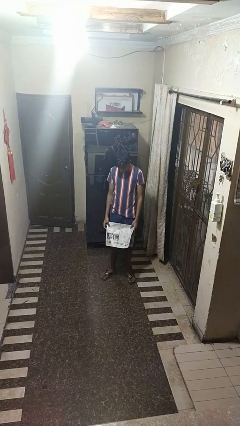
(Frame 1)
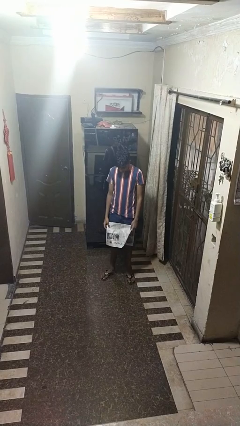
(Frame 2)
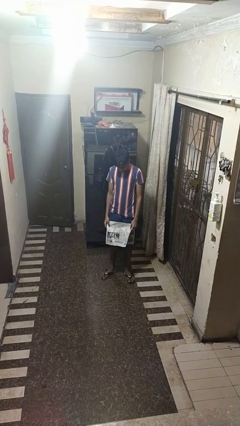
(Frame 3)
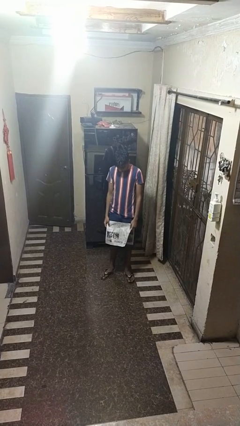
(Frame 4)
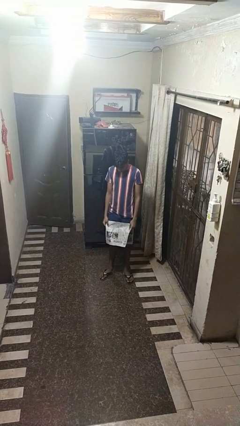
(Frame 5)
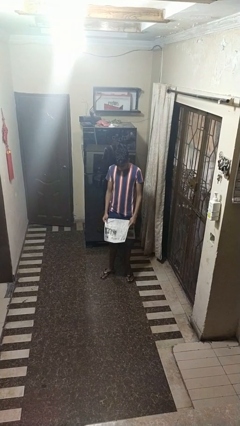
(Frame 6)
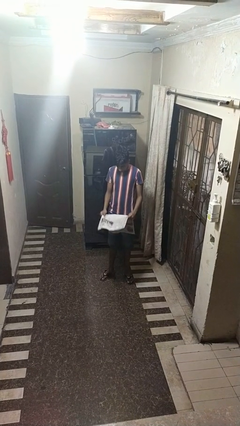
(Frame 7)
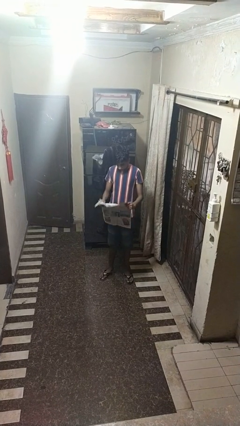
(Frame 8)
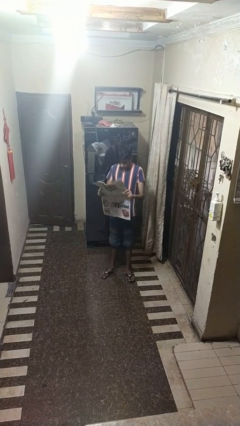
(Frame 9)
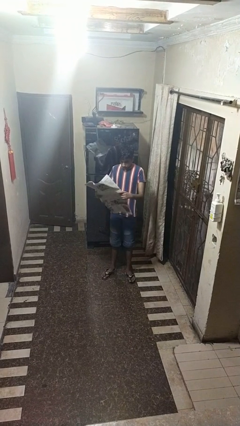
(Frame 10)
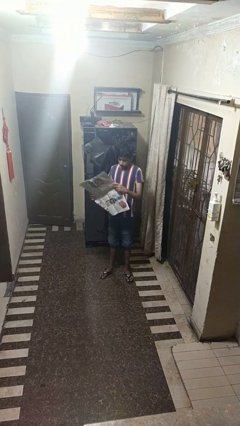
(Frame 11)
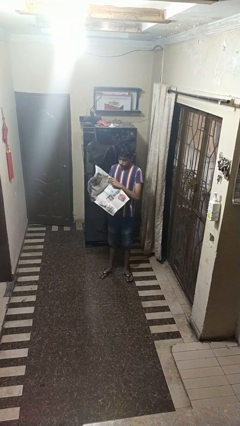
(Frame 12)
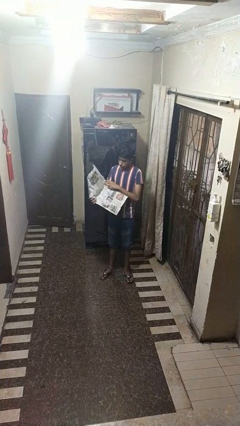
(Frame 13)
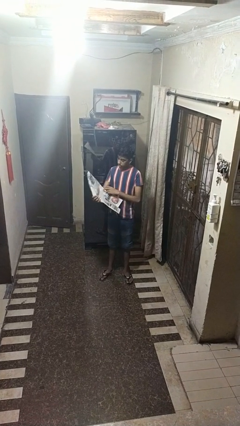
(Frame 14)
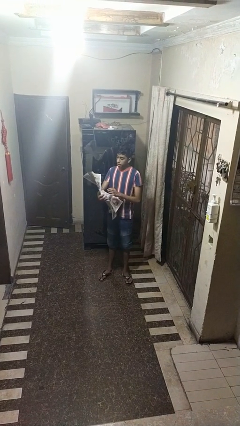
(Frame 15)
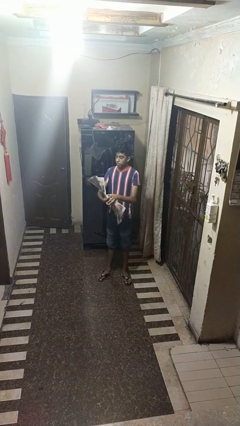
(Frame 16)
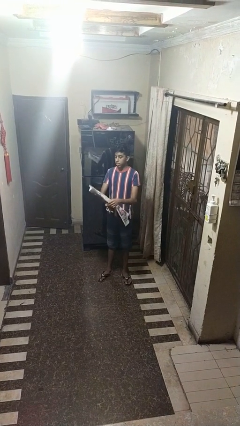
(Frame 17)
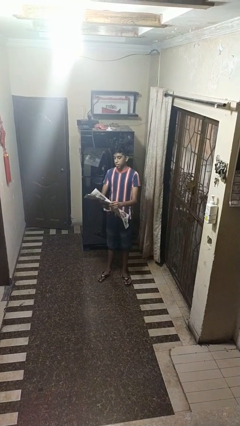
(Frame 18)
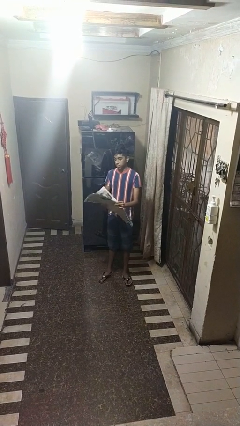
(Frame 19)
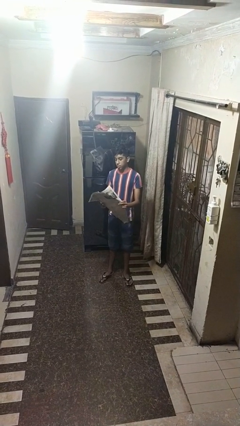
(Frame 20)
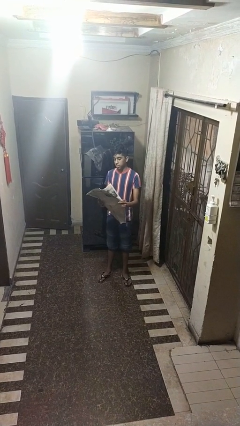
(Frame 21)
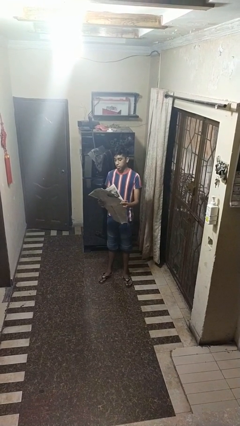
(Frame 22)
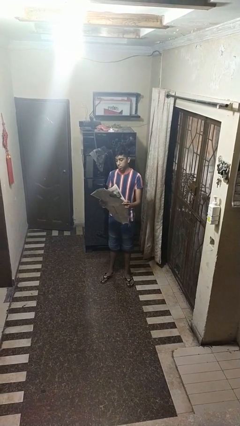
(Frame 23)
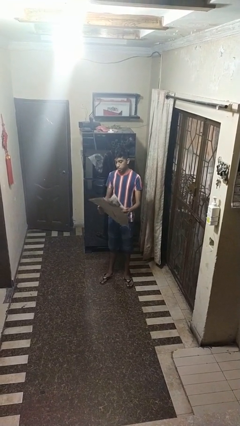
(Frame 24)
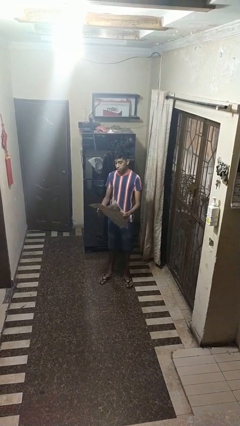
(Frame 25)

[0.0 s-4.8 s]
person reads newspaper

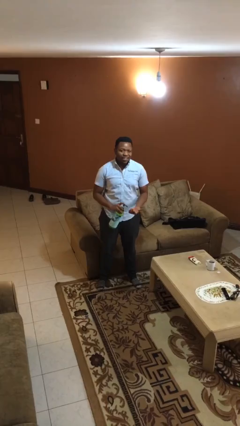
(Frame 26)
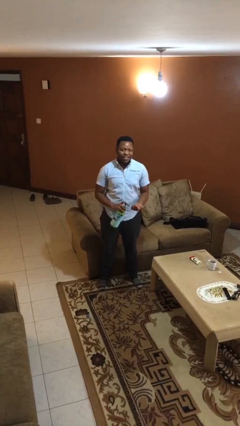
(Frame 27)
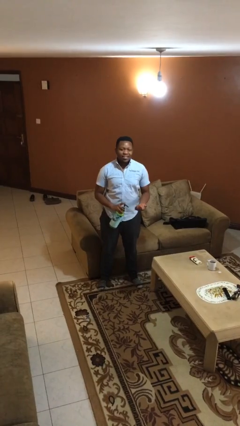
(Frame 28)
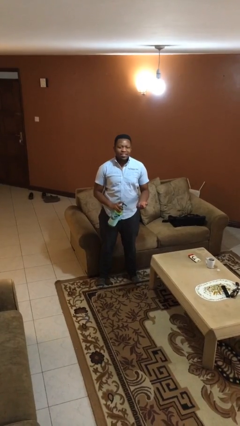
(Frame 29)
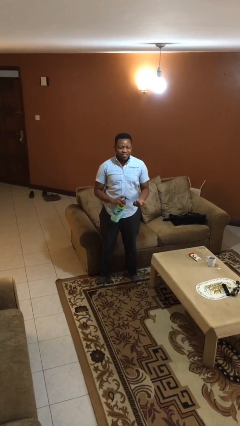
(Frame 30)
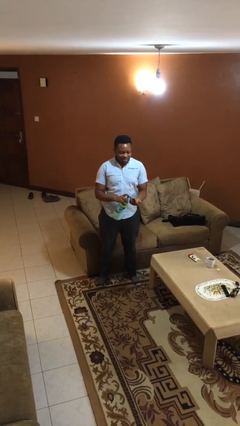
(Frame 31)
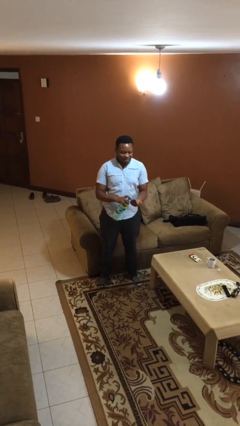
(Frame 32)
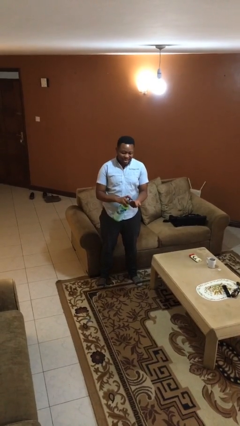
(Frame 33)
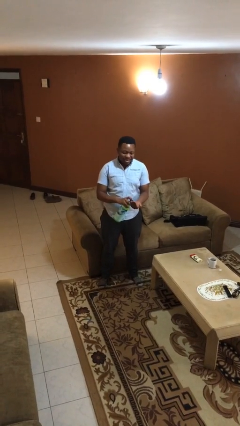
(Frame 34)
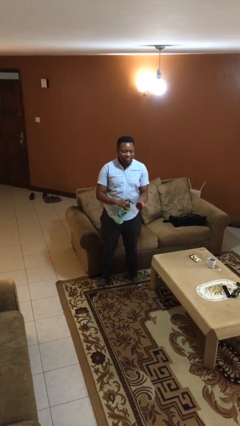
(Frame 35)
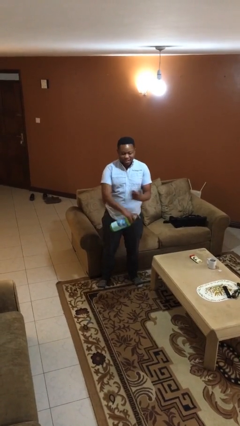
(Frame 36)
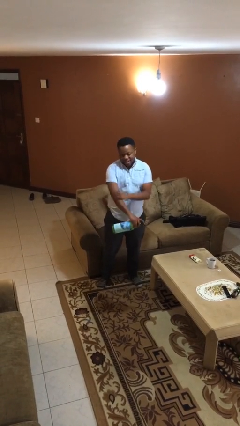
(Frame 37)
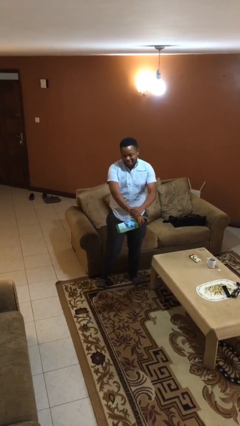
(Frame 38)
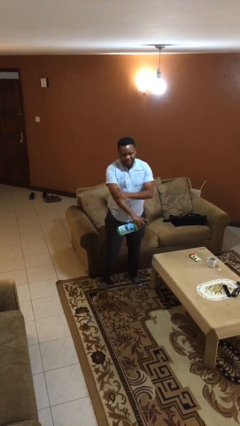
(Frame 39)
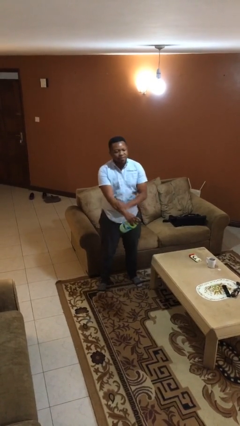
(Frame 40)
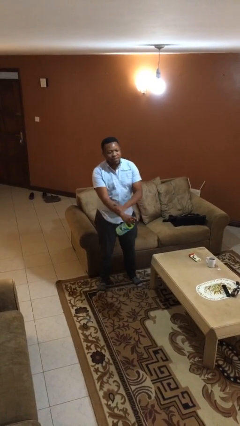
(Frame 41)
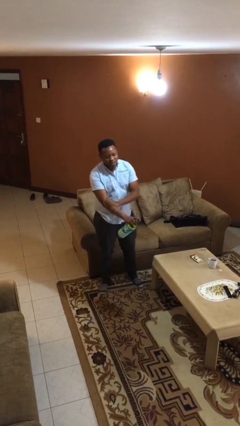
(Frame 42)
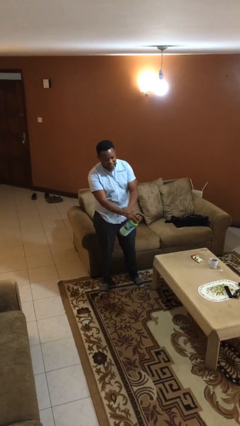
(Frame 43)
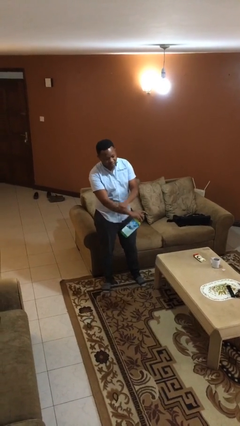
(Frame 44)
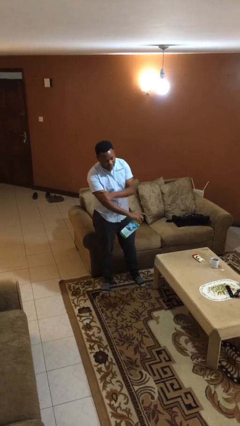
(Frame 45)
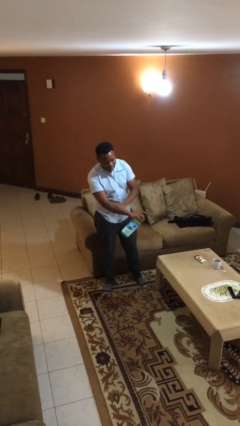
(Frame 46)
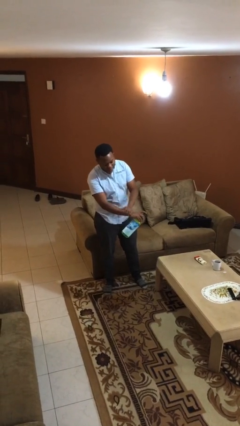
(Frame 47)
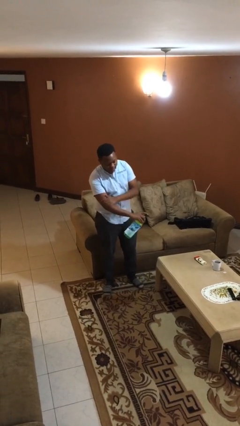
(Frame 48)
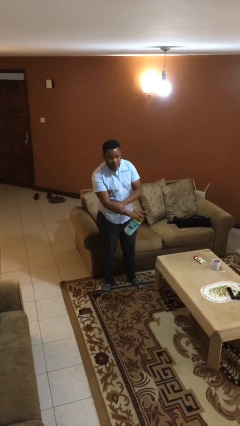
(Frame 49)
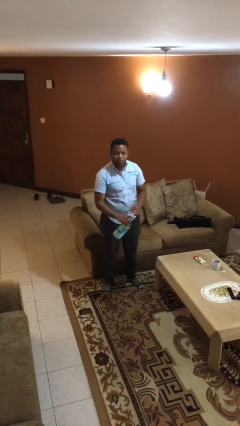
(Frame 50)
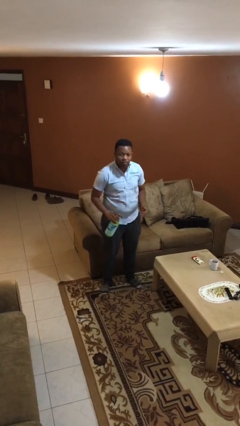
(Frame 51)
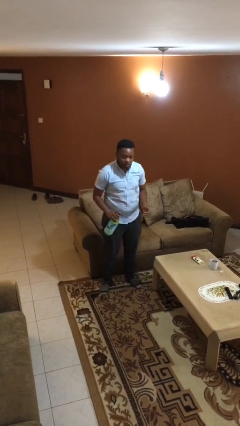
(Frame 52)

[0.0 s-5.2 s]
person applies sunscreen

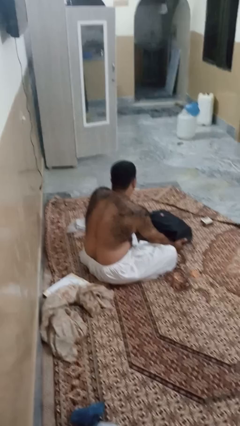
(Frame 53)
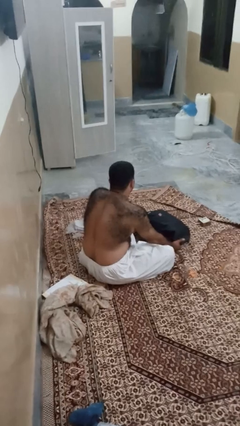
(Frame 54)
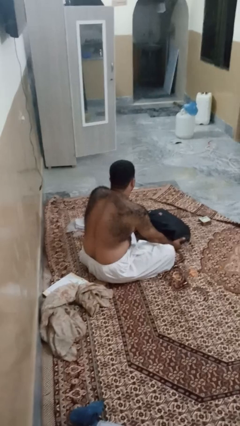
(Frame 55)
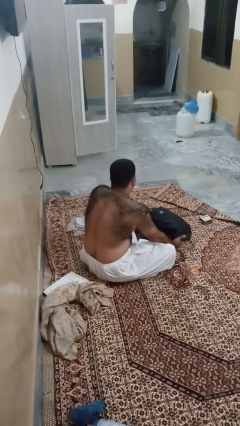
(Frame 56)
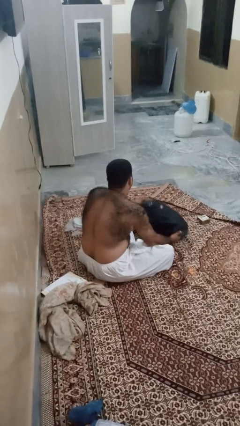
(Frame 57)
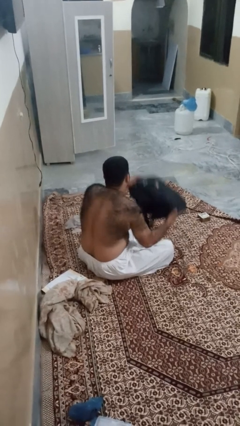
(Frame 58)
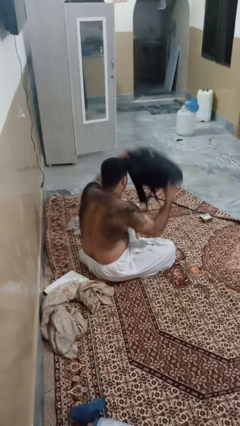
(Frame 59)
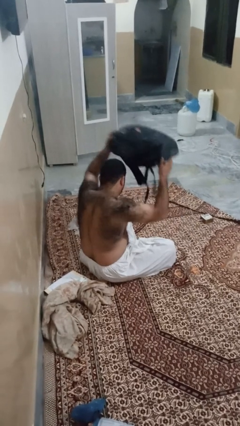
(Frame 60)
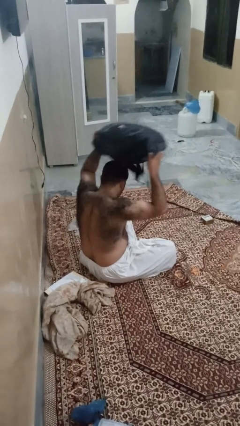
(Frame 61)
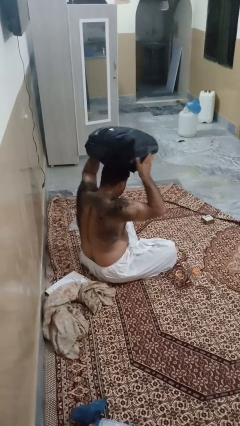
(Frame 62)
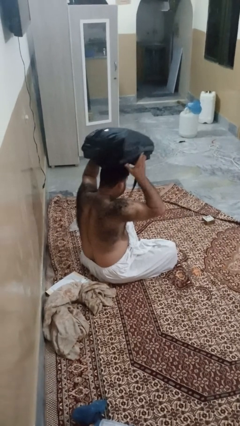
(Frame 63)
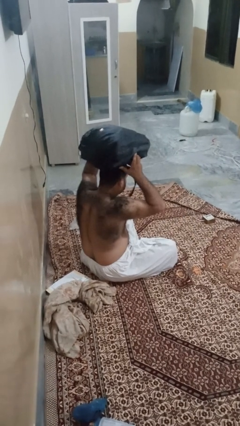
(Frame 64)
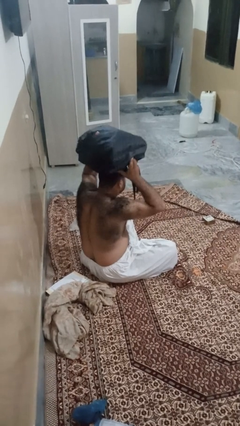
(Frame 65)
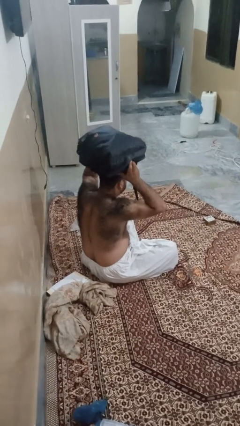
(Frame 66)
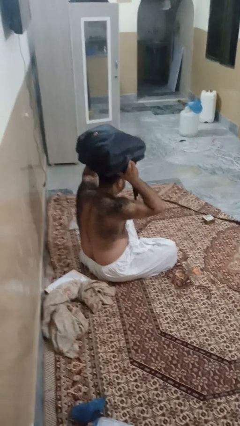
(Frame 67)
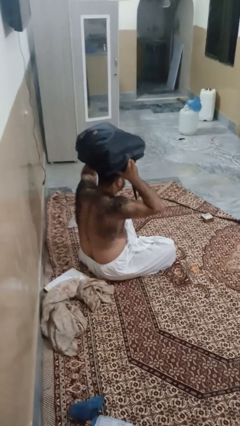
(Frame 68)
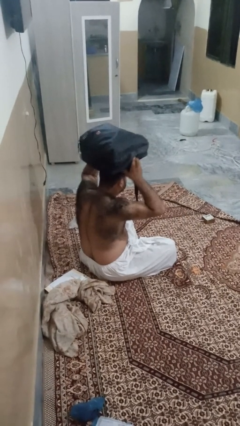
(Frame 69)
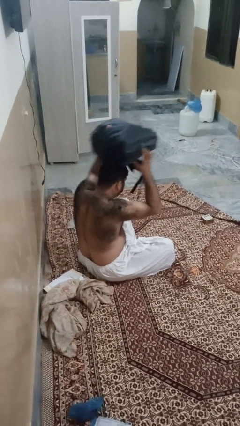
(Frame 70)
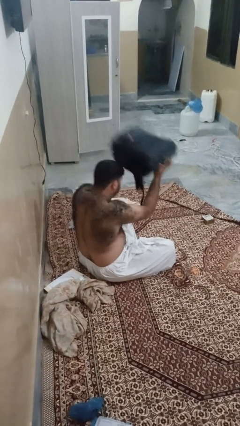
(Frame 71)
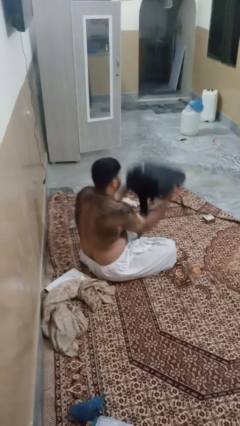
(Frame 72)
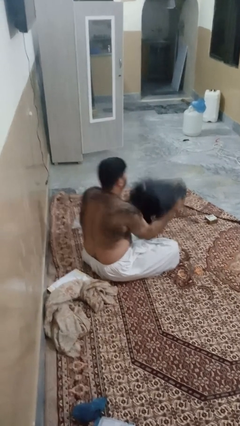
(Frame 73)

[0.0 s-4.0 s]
person holds object above head

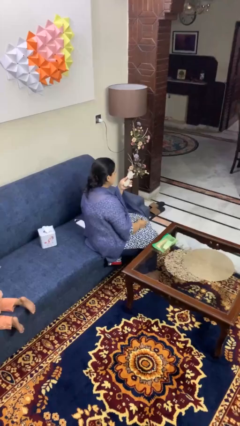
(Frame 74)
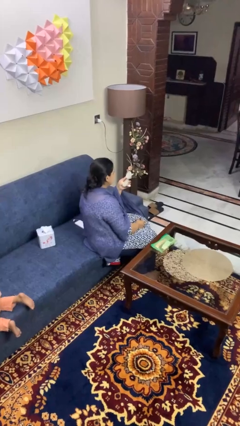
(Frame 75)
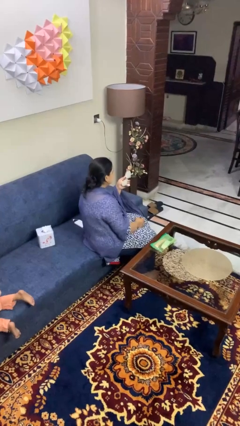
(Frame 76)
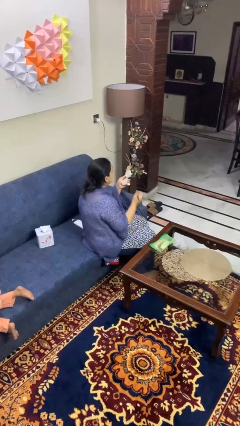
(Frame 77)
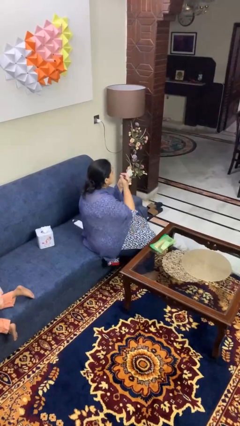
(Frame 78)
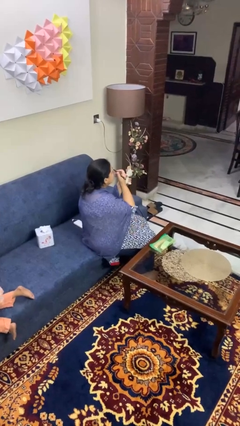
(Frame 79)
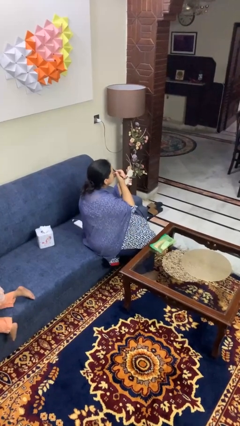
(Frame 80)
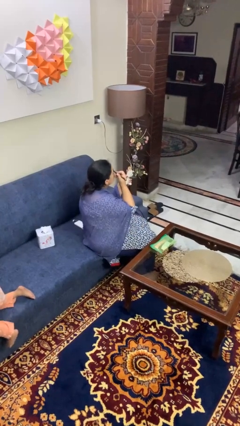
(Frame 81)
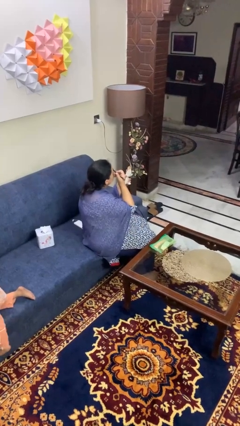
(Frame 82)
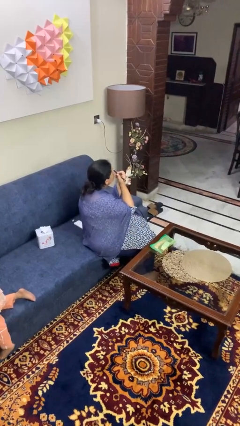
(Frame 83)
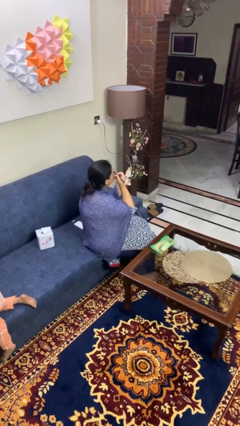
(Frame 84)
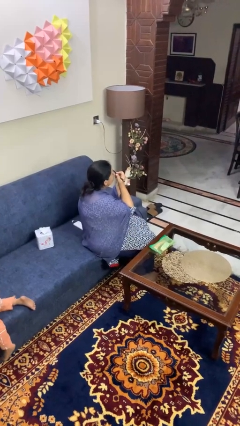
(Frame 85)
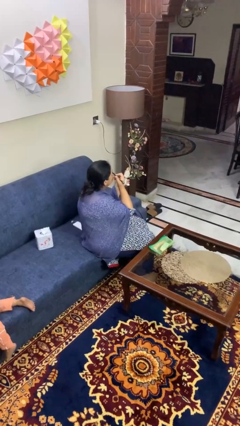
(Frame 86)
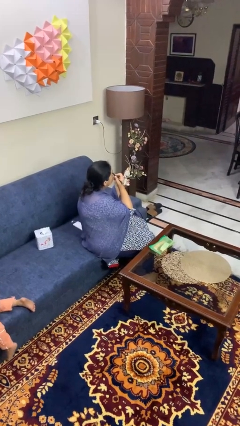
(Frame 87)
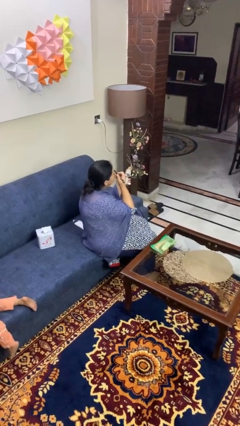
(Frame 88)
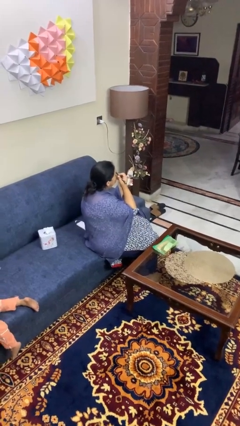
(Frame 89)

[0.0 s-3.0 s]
person applies eye makeup

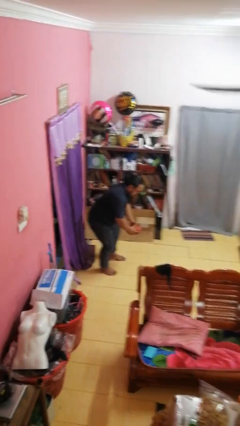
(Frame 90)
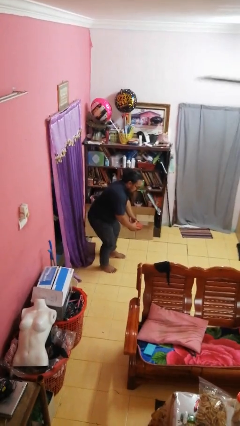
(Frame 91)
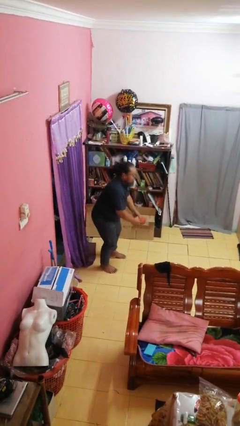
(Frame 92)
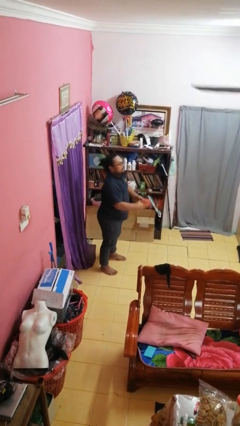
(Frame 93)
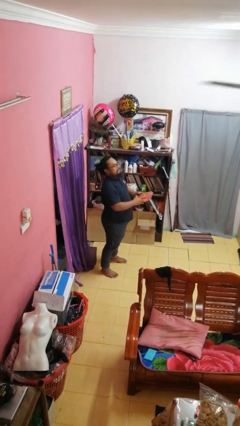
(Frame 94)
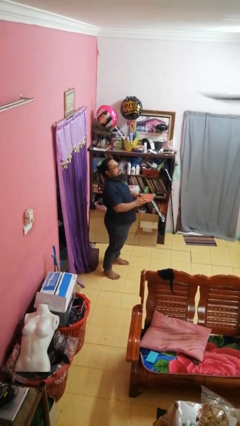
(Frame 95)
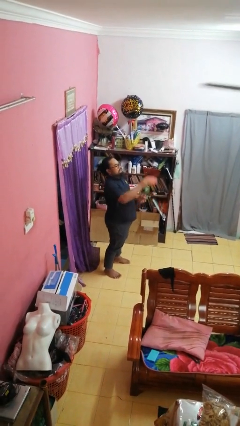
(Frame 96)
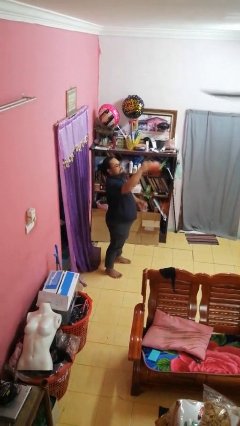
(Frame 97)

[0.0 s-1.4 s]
person catches dropped object
